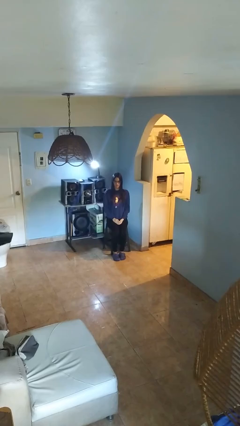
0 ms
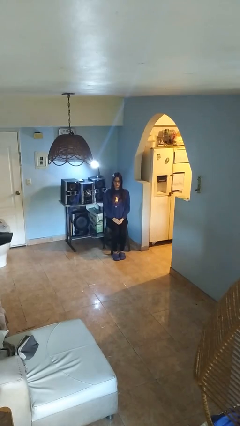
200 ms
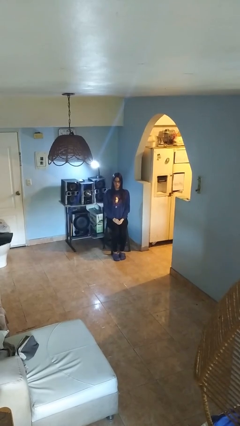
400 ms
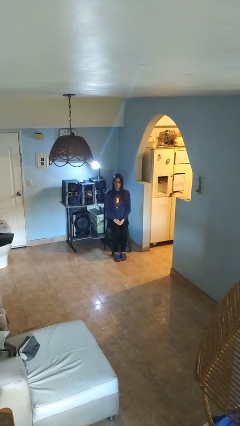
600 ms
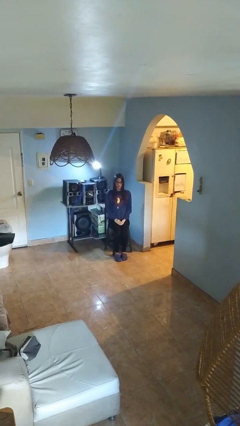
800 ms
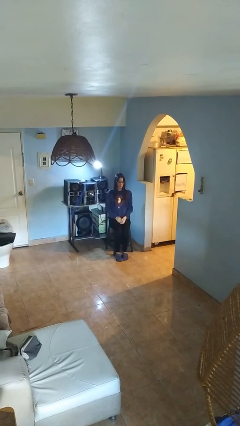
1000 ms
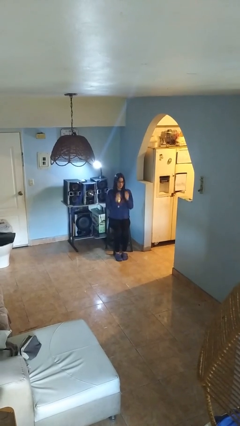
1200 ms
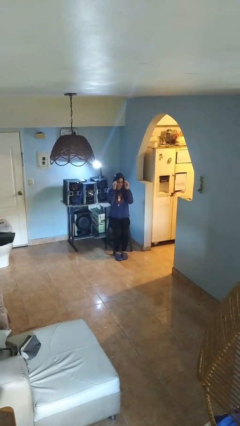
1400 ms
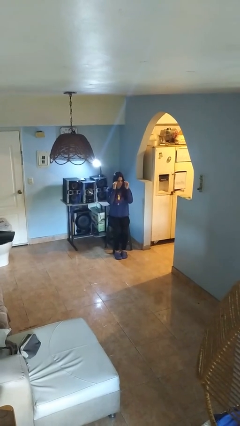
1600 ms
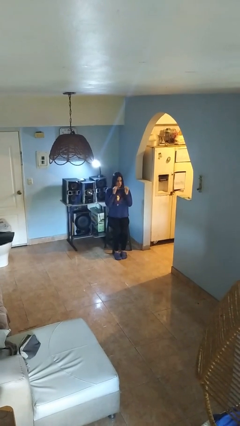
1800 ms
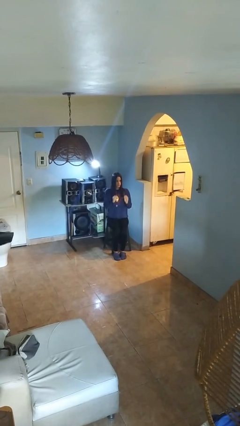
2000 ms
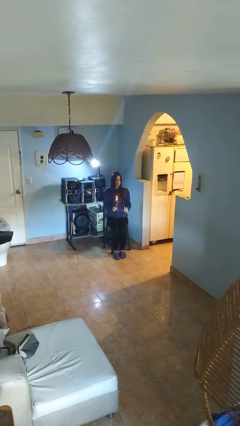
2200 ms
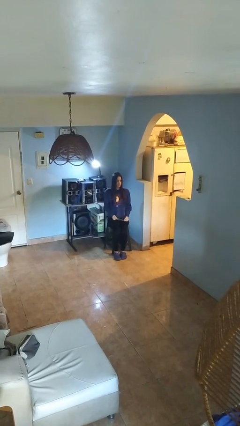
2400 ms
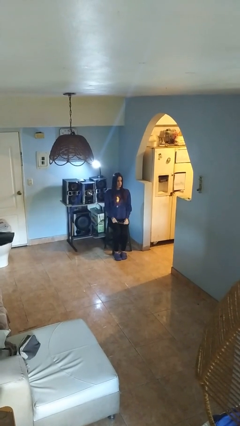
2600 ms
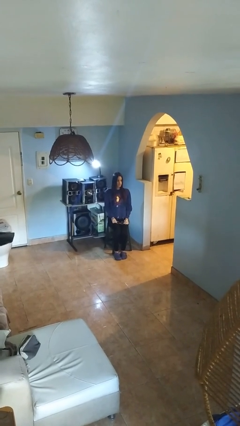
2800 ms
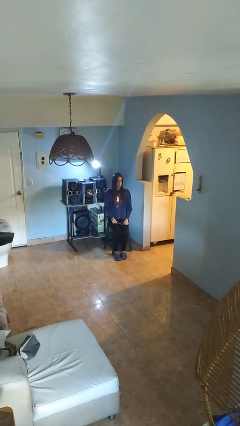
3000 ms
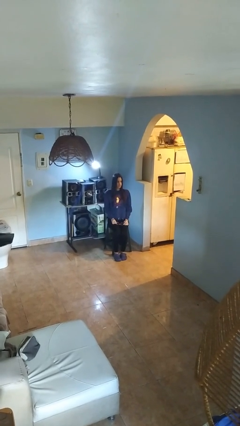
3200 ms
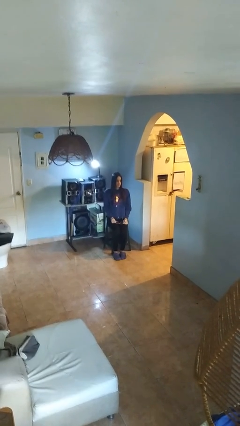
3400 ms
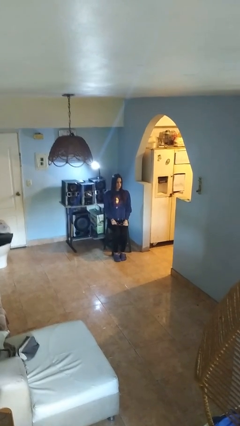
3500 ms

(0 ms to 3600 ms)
person takes off glasses

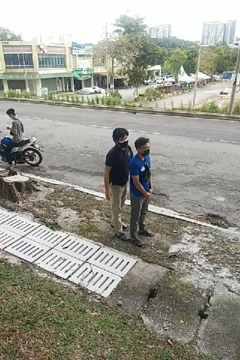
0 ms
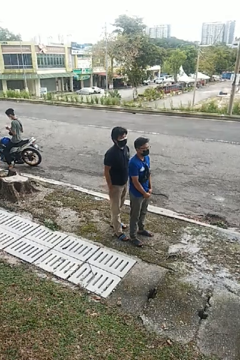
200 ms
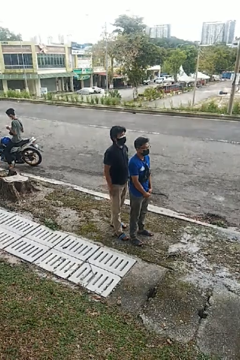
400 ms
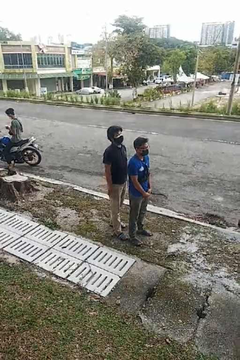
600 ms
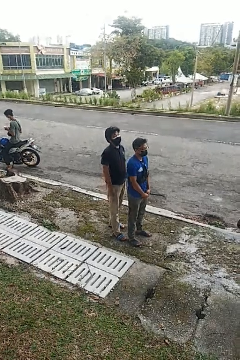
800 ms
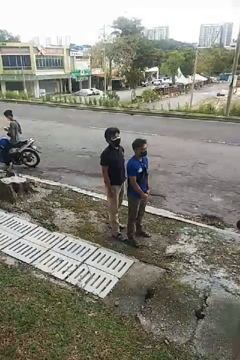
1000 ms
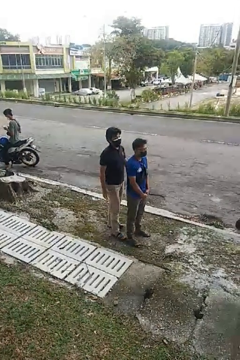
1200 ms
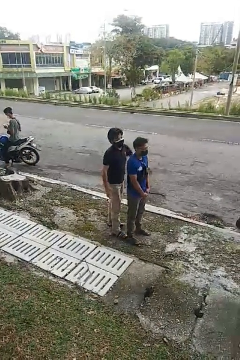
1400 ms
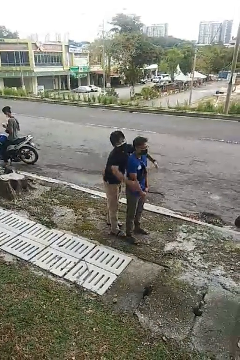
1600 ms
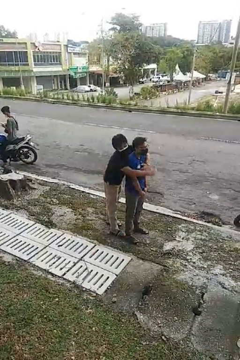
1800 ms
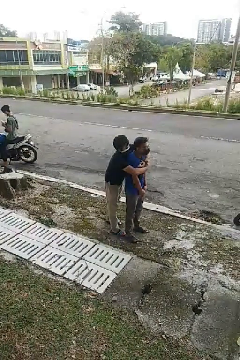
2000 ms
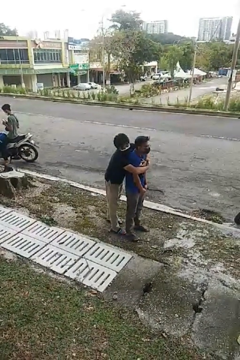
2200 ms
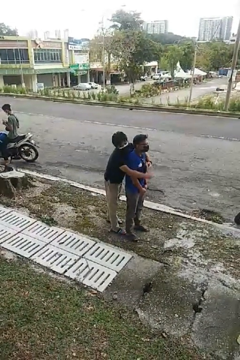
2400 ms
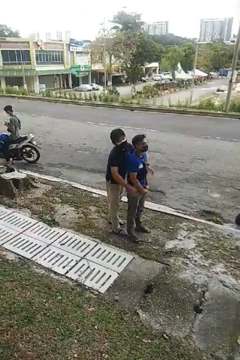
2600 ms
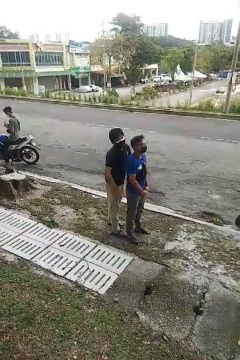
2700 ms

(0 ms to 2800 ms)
person hugs person from behind

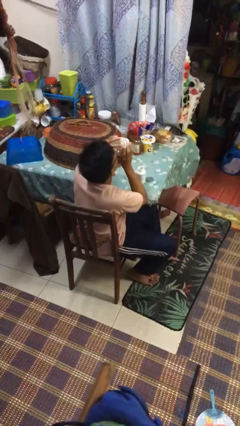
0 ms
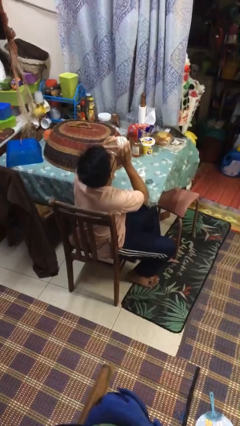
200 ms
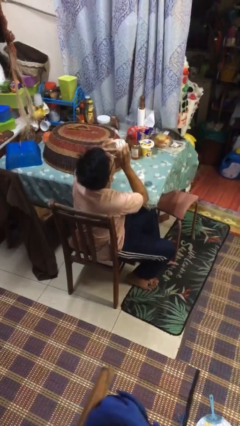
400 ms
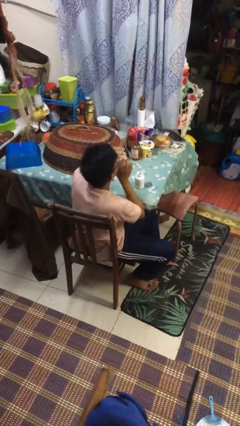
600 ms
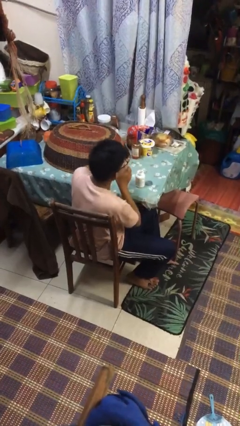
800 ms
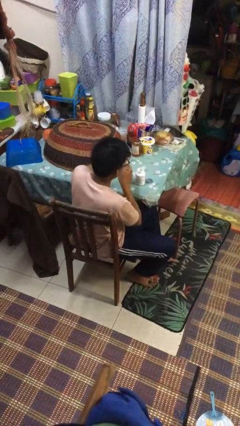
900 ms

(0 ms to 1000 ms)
person drinks from cup

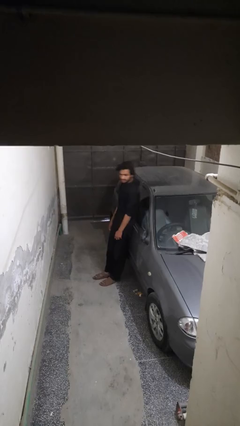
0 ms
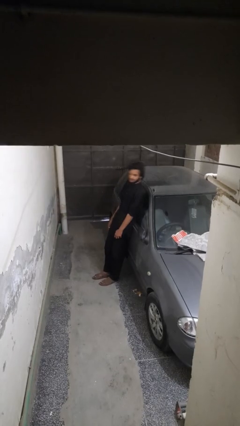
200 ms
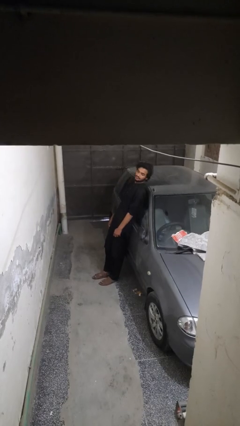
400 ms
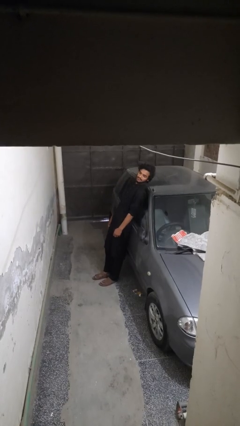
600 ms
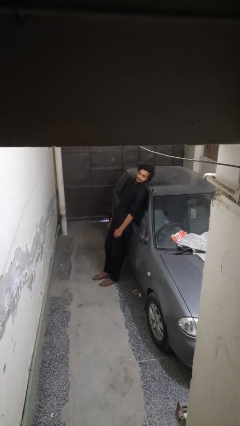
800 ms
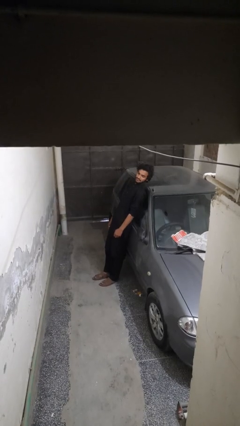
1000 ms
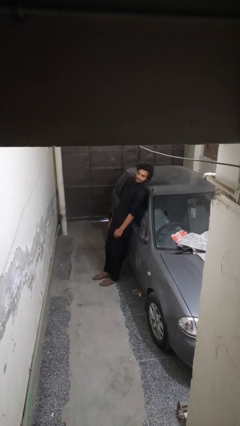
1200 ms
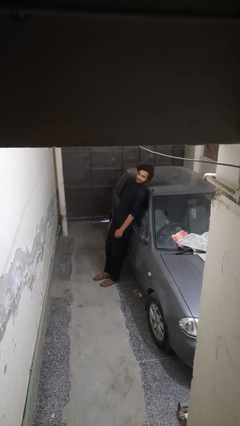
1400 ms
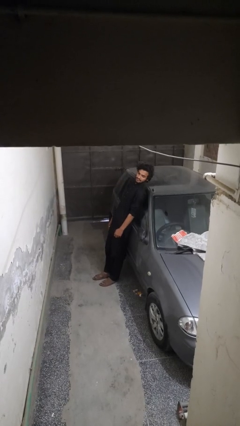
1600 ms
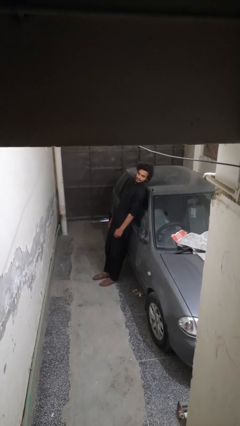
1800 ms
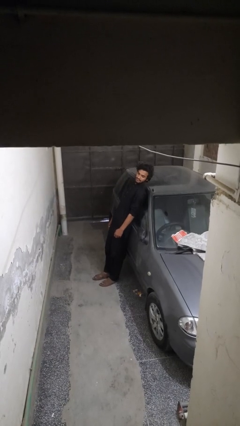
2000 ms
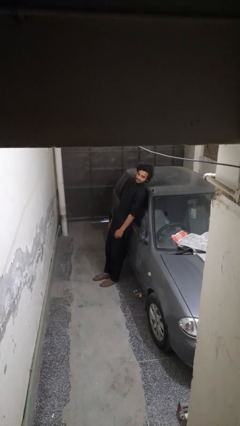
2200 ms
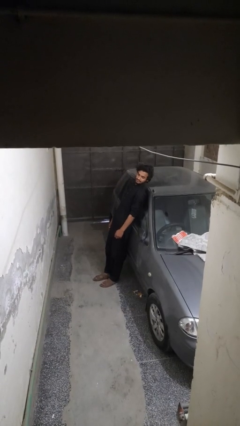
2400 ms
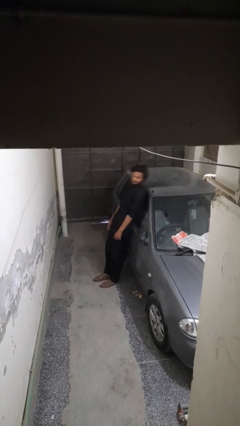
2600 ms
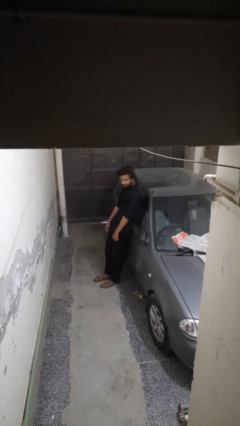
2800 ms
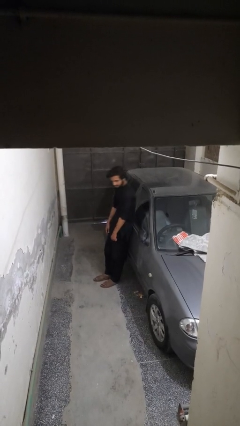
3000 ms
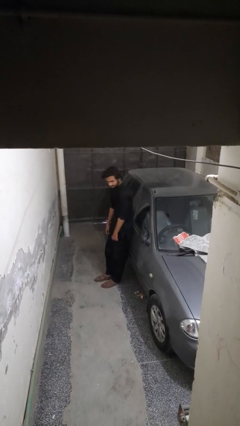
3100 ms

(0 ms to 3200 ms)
person leans against car

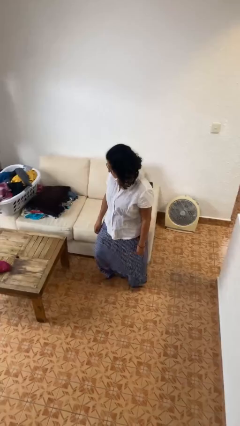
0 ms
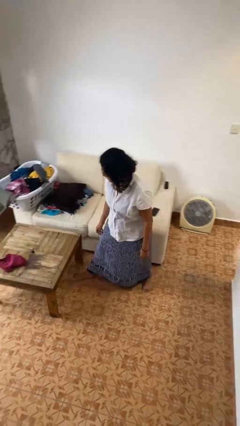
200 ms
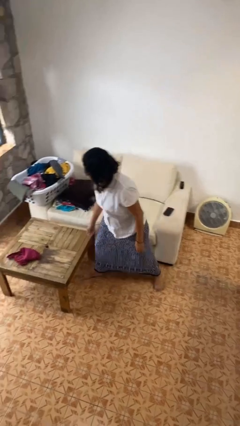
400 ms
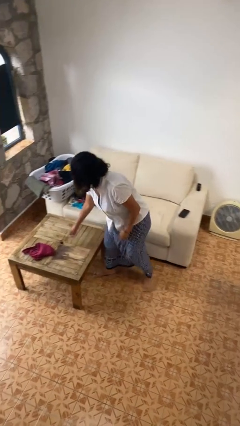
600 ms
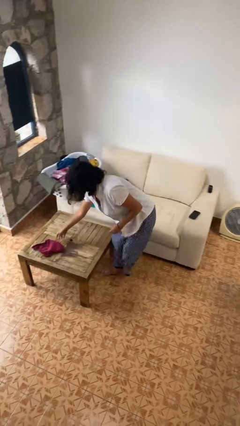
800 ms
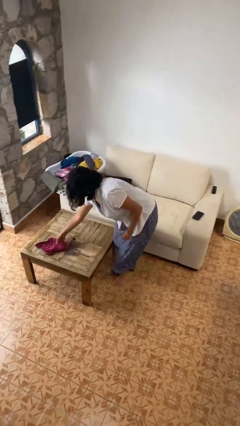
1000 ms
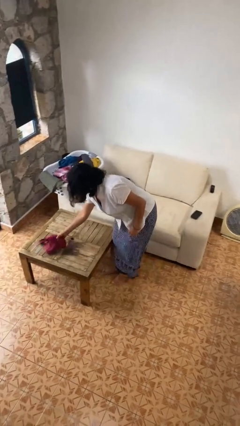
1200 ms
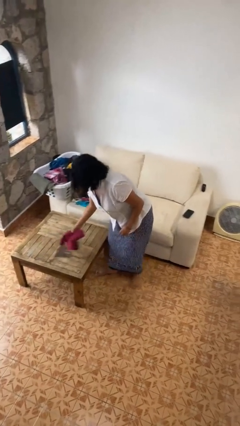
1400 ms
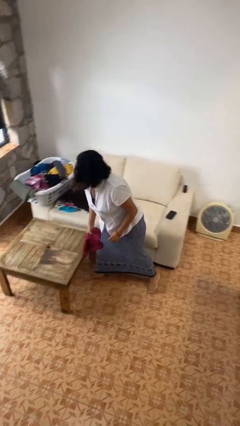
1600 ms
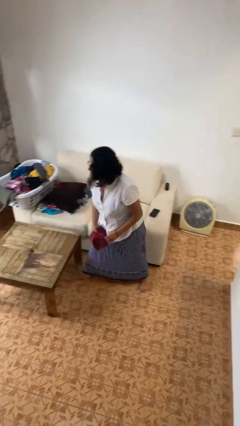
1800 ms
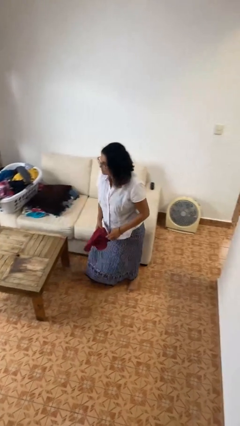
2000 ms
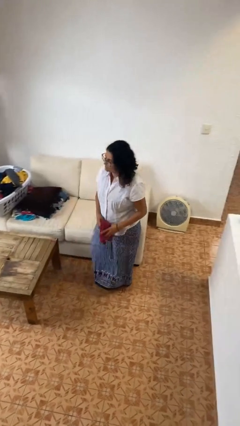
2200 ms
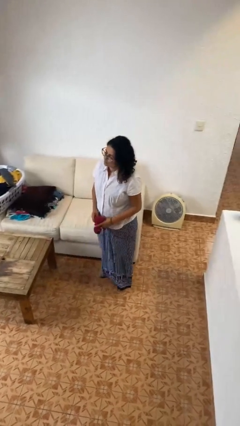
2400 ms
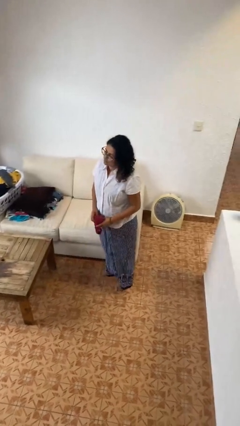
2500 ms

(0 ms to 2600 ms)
person picks up object from table

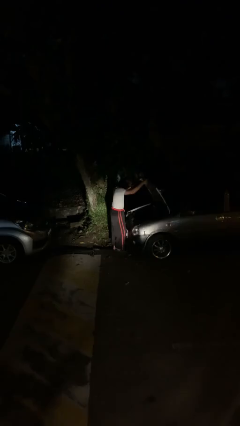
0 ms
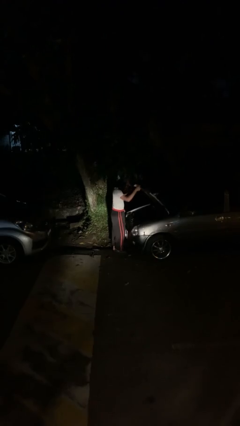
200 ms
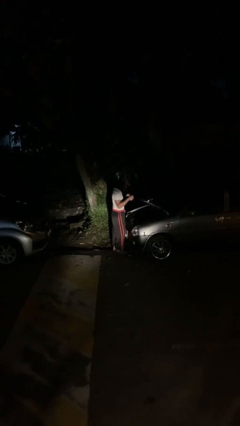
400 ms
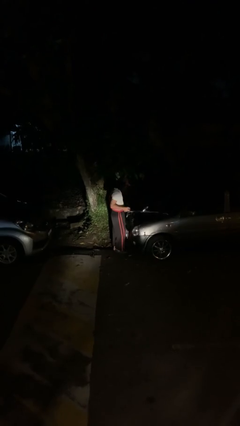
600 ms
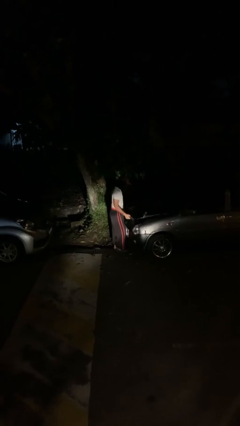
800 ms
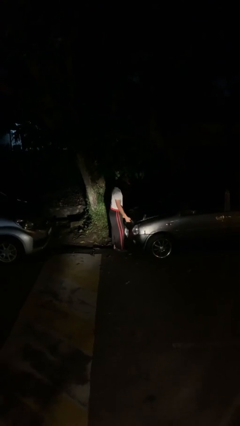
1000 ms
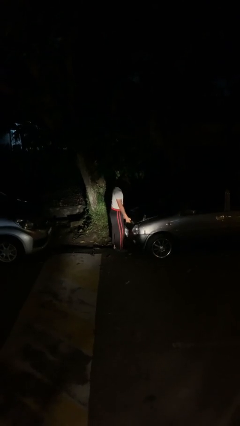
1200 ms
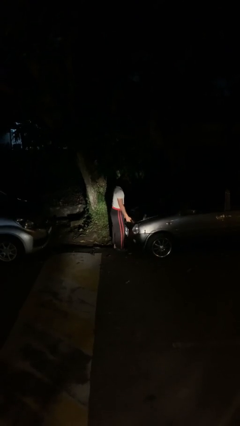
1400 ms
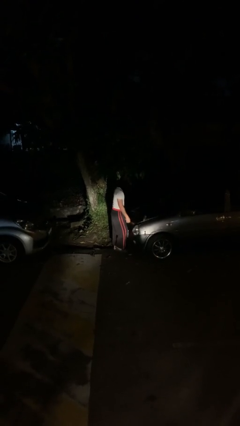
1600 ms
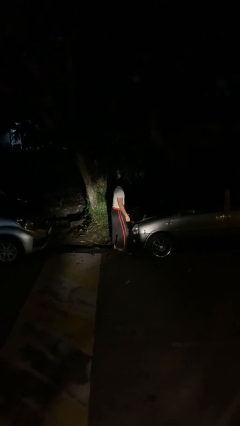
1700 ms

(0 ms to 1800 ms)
person closes car hood

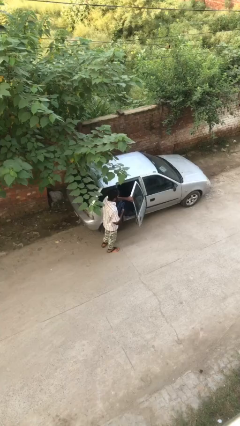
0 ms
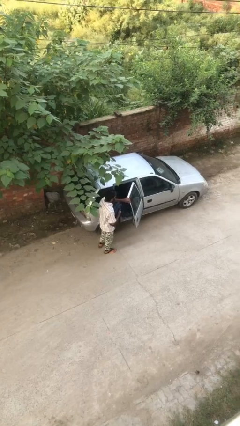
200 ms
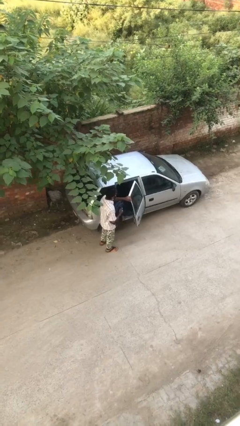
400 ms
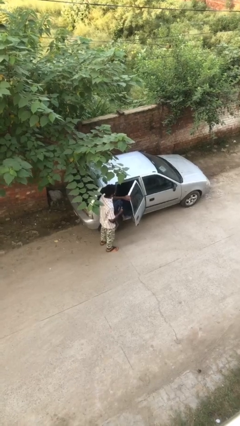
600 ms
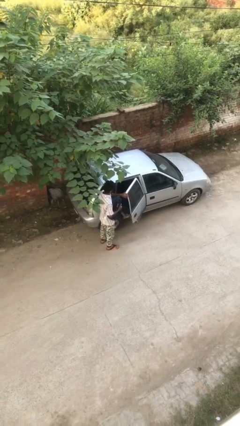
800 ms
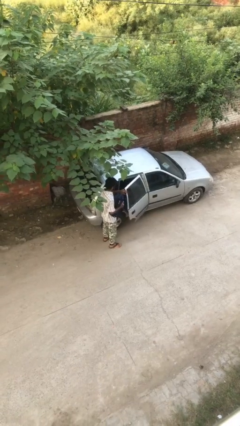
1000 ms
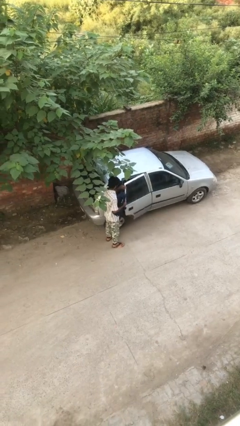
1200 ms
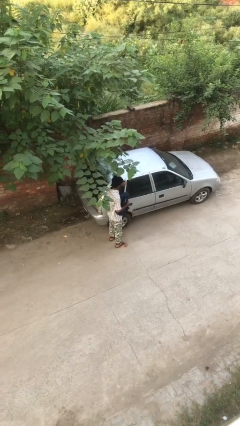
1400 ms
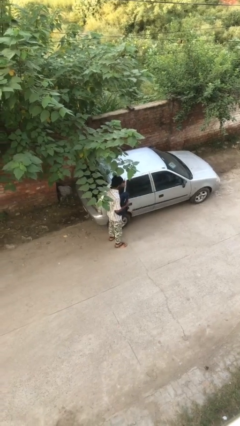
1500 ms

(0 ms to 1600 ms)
person closes car door

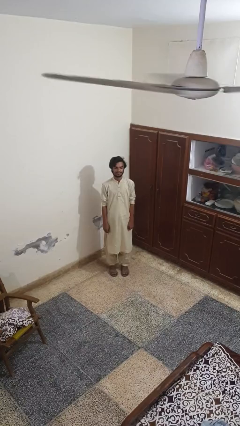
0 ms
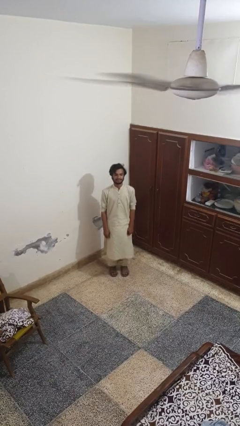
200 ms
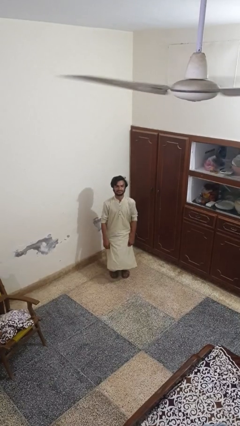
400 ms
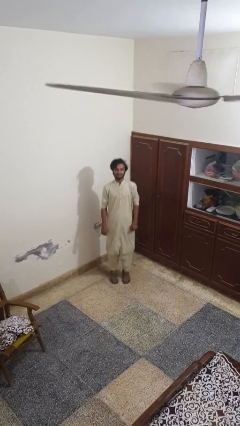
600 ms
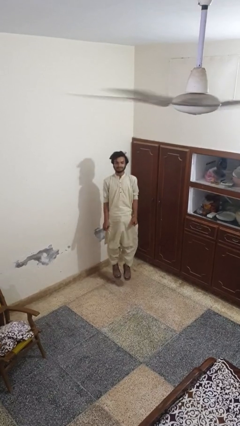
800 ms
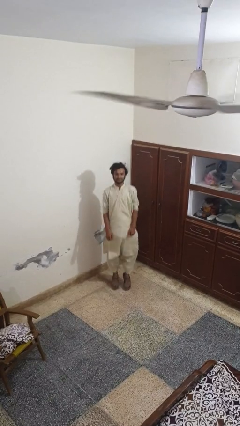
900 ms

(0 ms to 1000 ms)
person jumps
